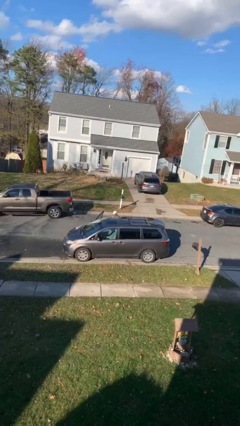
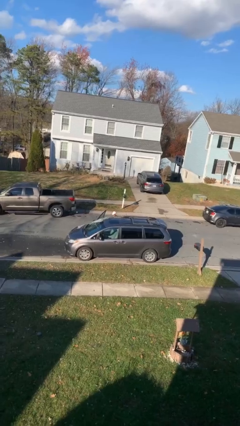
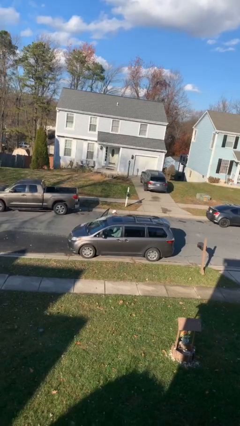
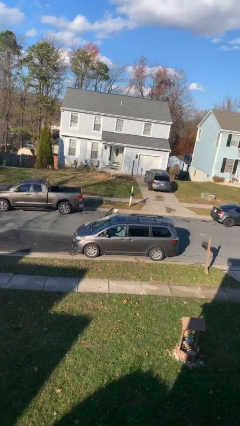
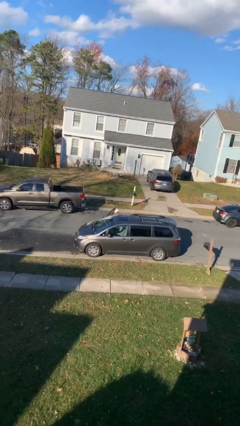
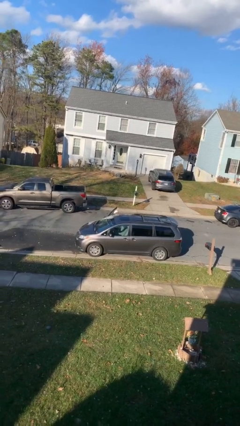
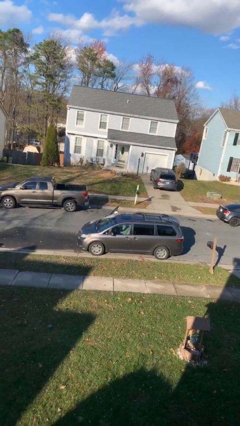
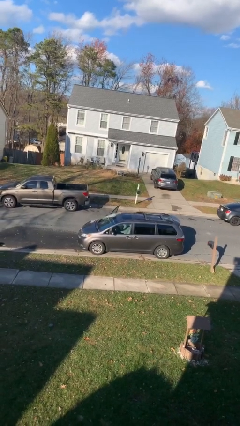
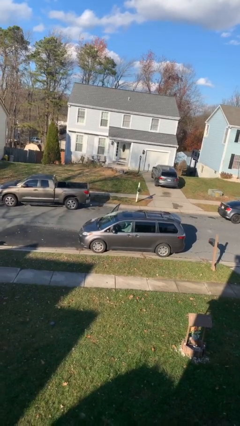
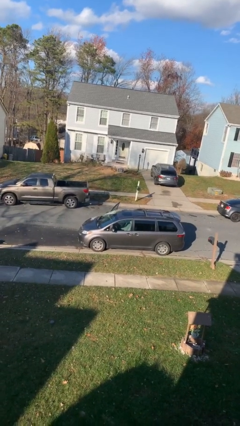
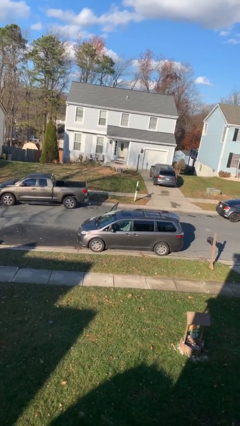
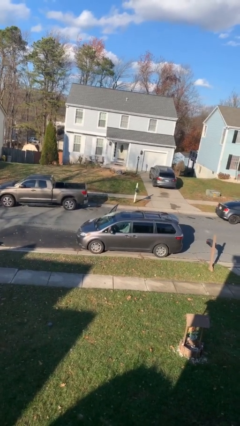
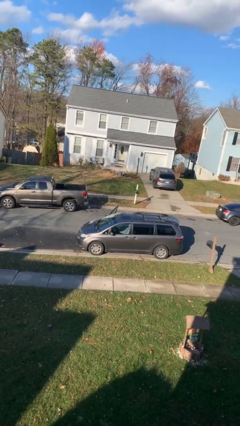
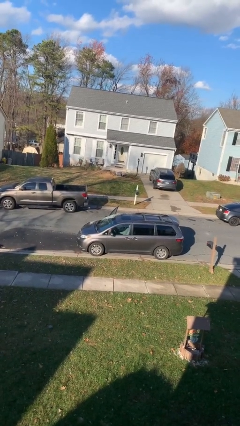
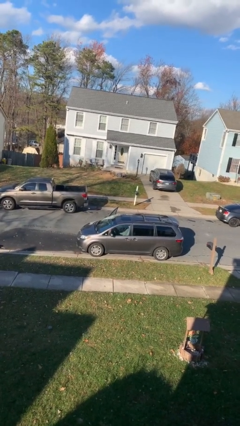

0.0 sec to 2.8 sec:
person enters car

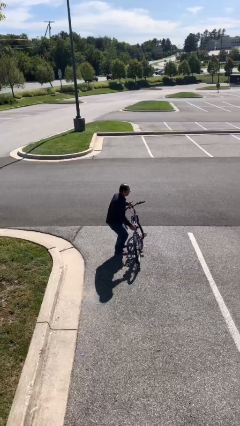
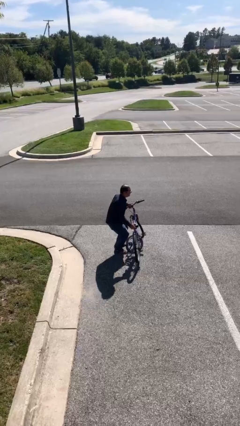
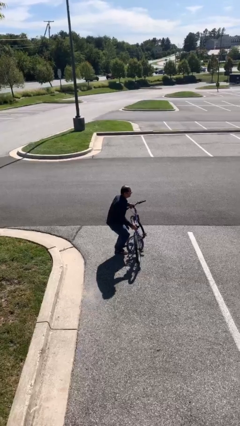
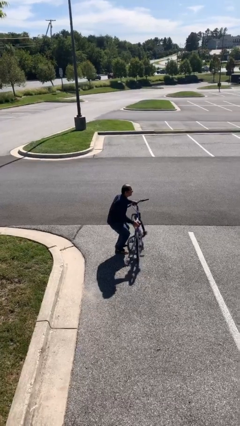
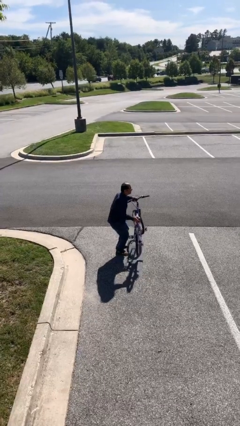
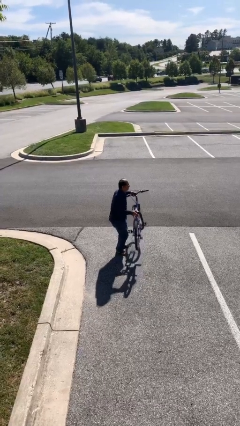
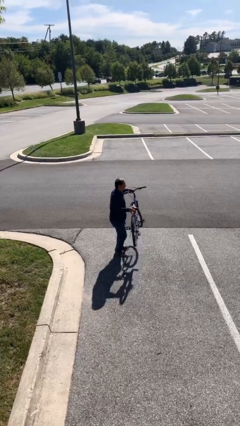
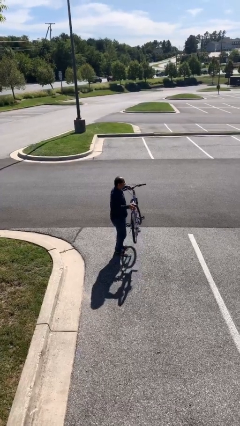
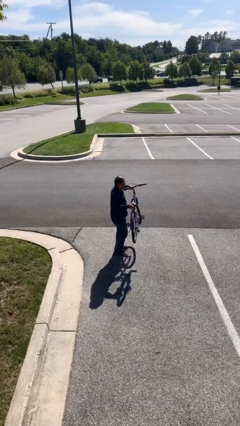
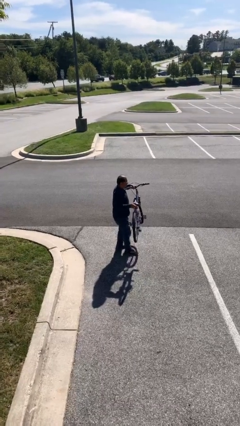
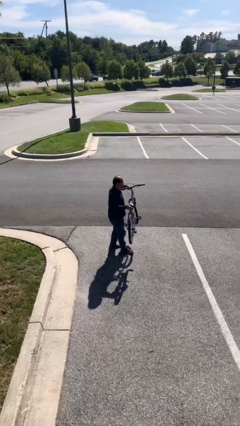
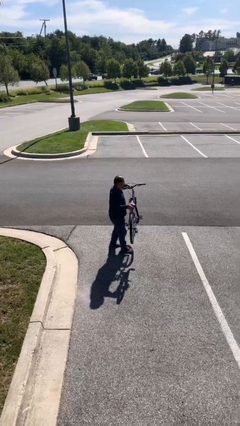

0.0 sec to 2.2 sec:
person picks up object from floor

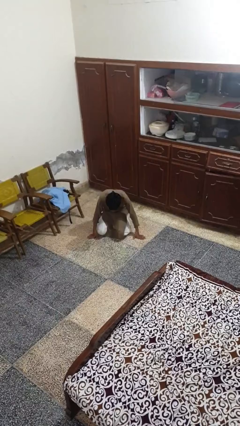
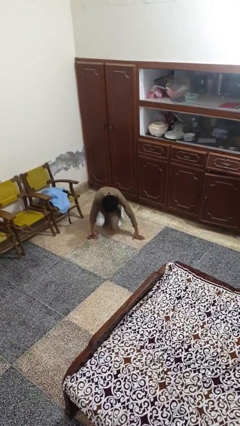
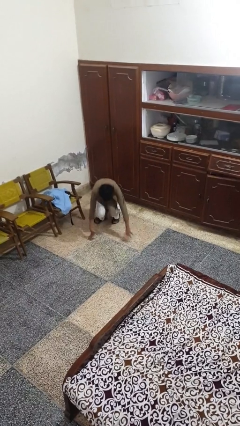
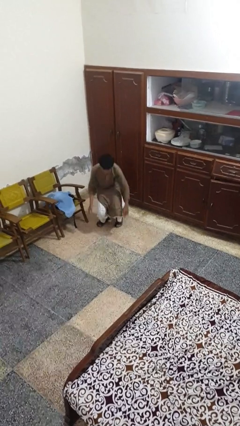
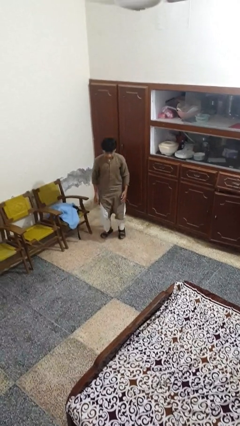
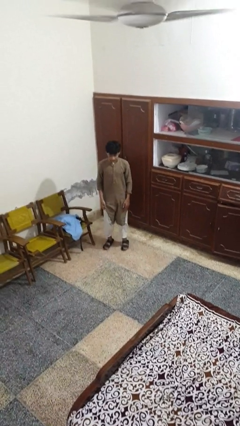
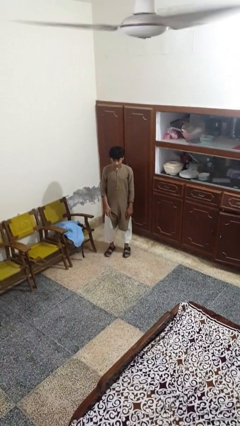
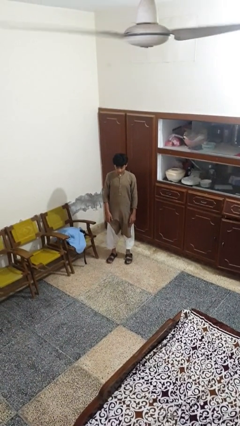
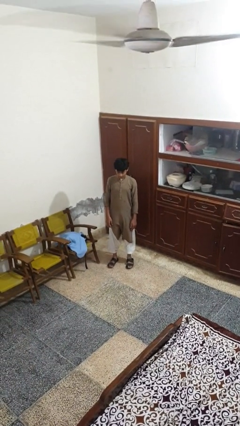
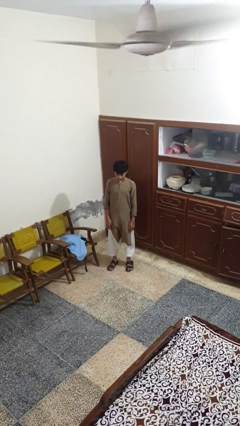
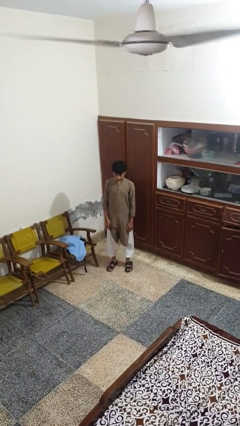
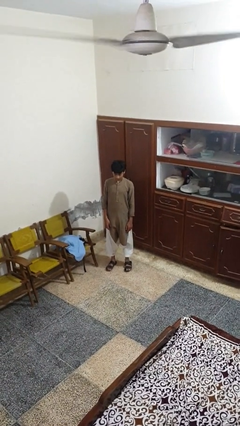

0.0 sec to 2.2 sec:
person stands up from floor

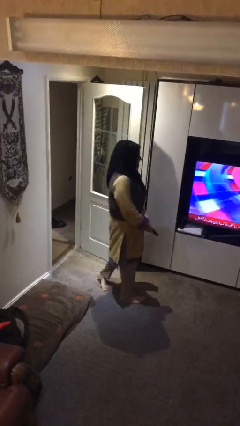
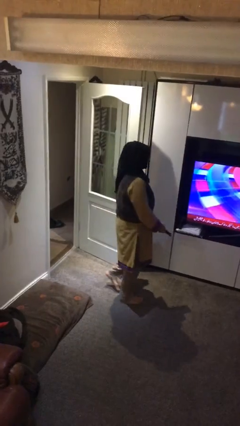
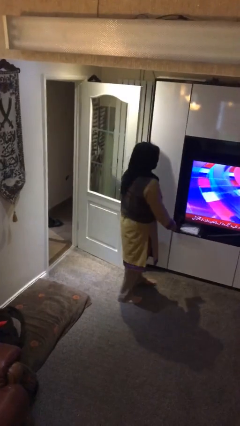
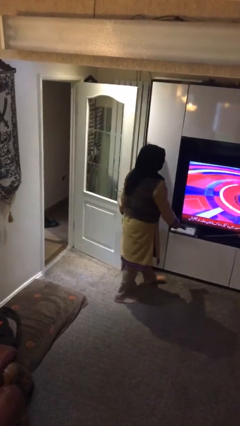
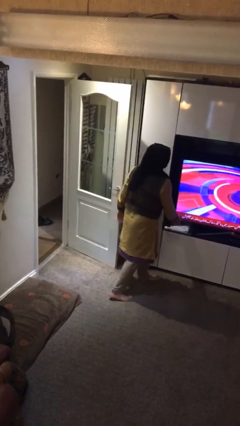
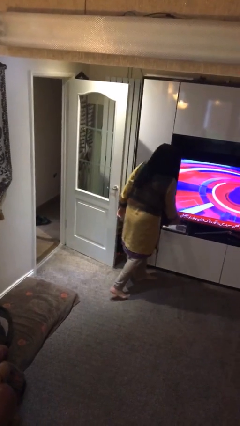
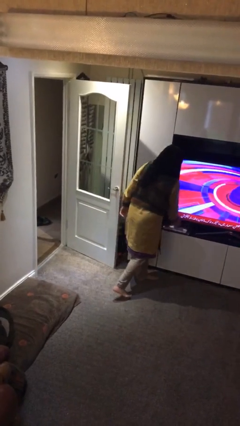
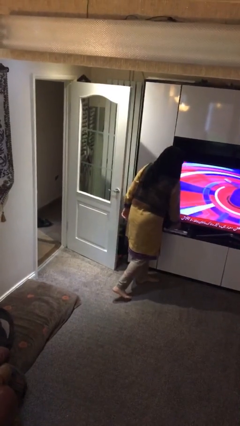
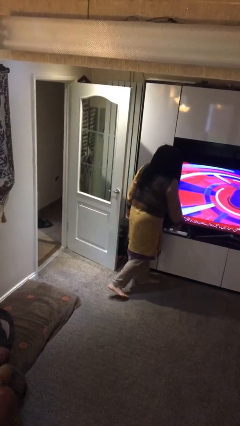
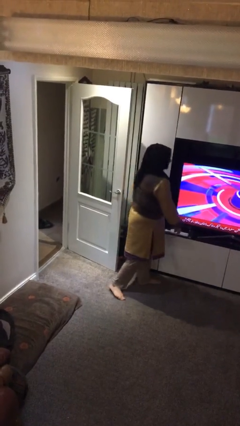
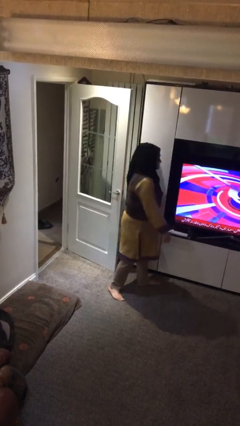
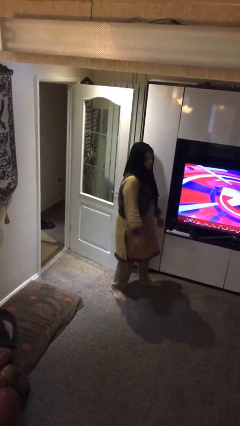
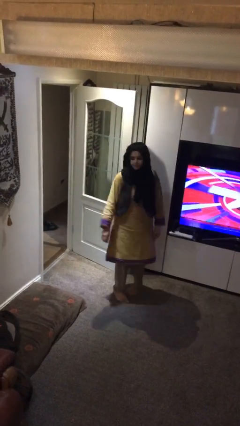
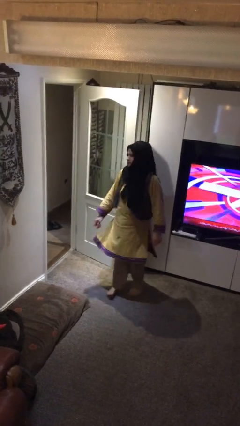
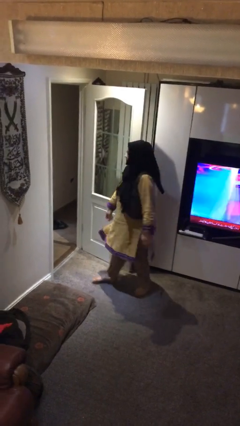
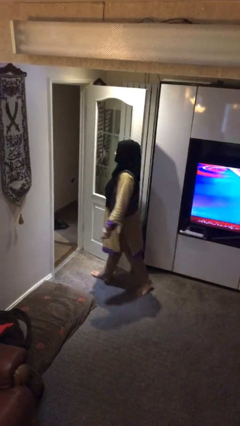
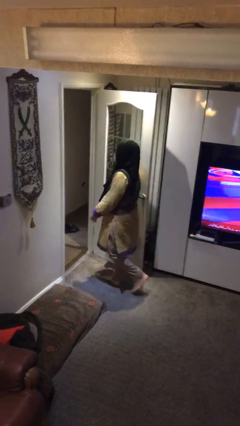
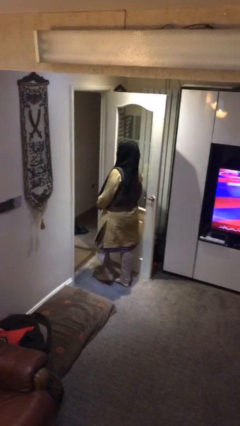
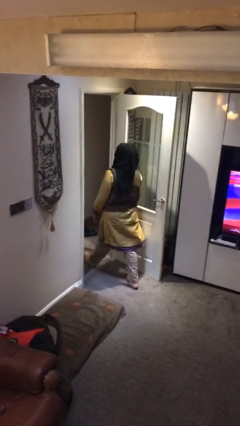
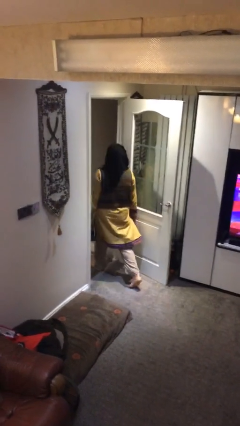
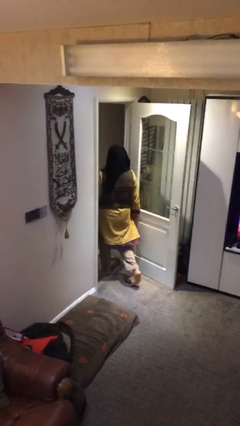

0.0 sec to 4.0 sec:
person exits scene through structure

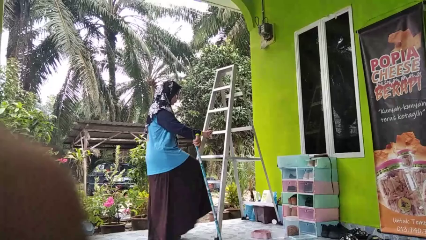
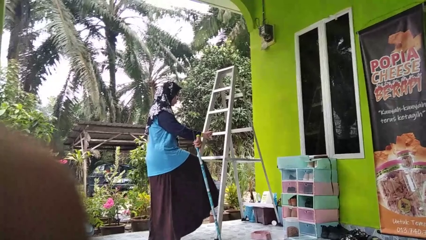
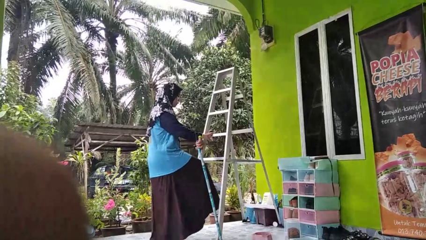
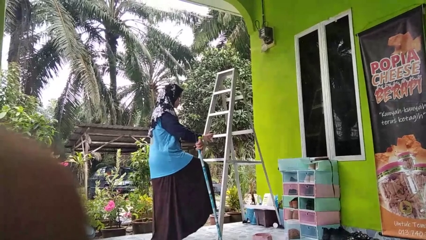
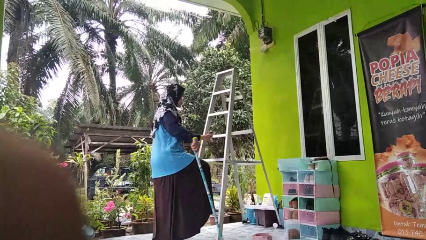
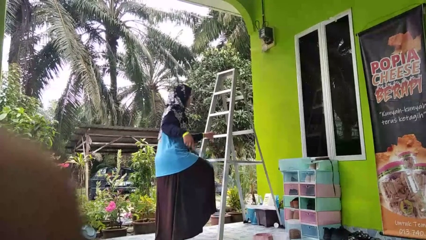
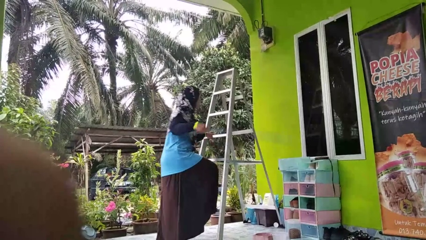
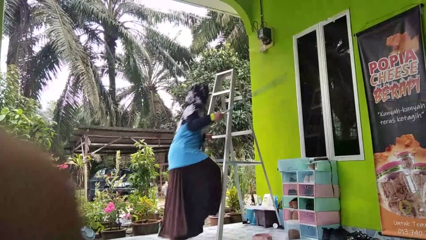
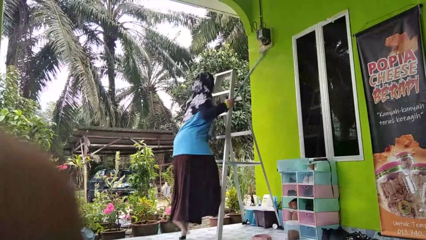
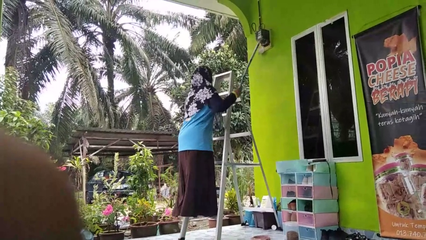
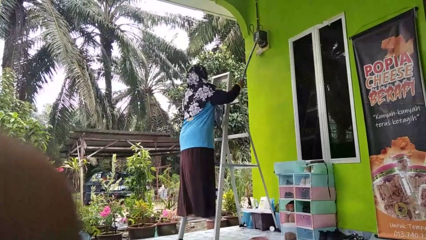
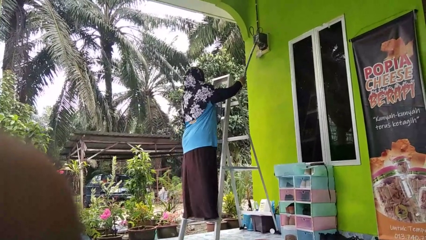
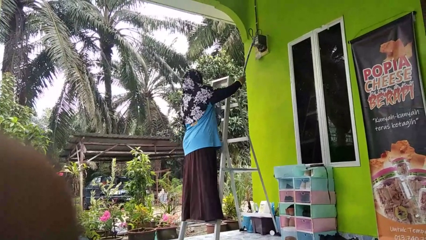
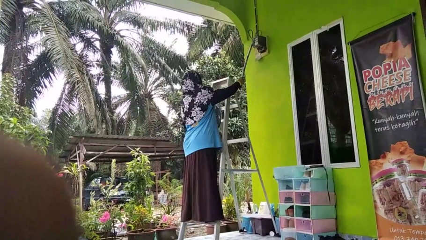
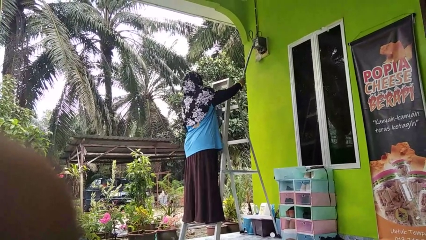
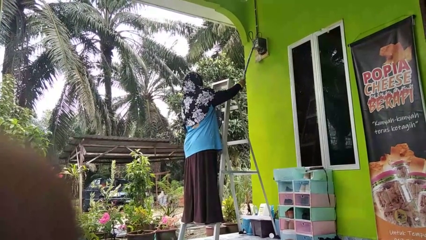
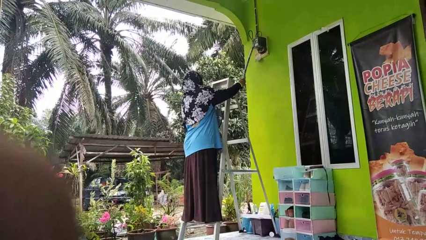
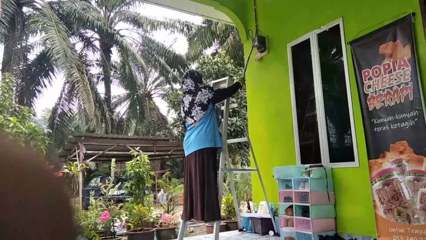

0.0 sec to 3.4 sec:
person climbs up ladder

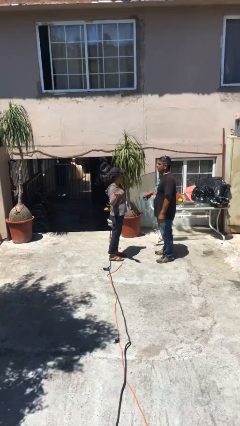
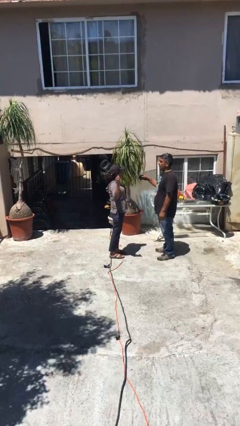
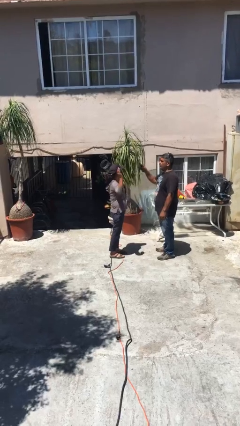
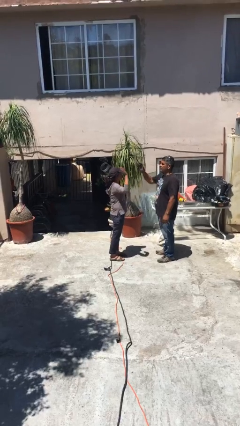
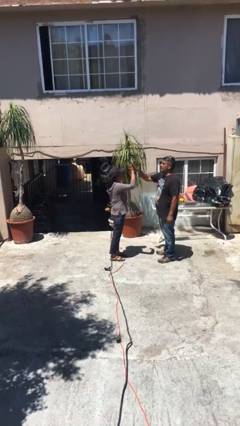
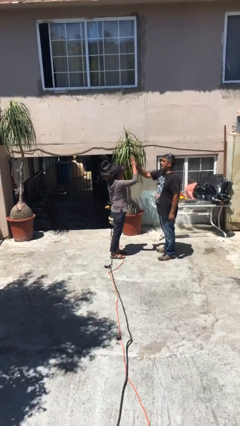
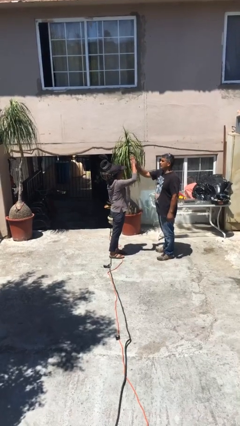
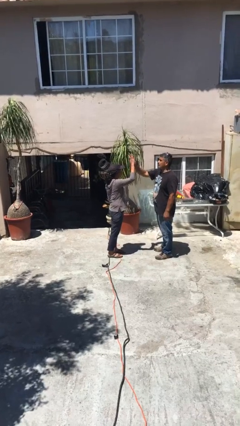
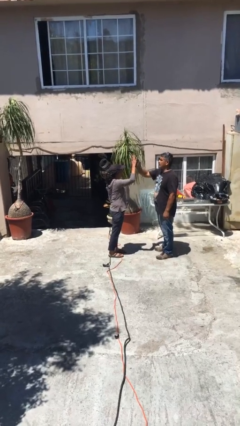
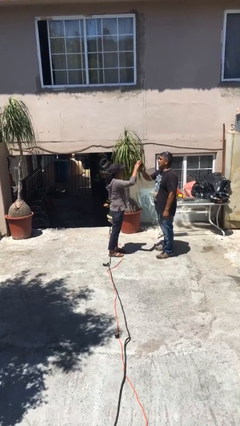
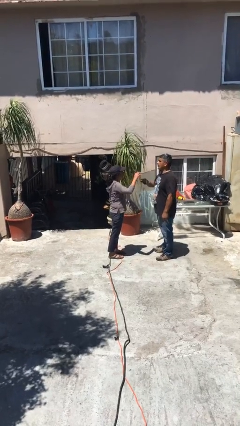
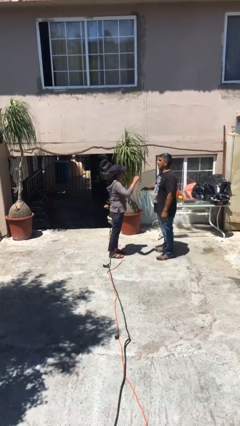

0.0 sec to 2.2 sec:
person highfives hand

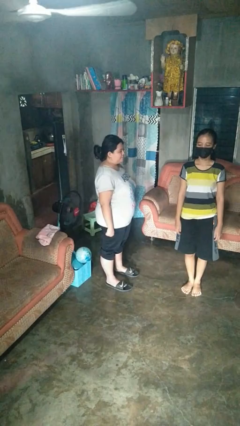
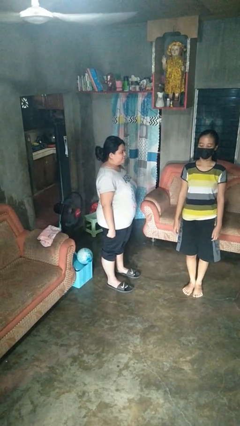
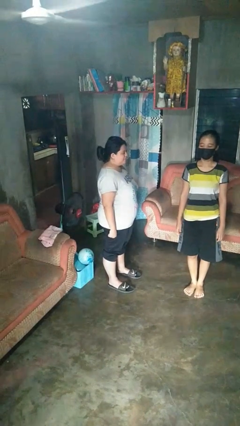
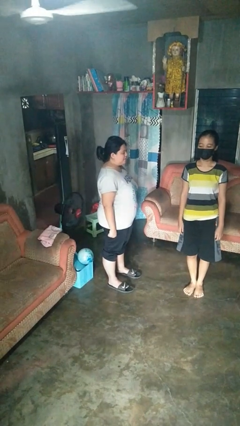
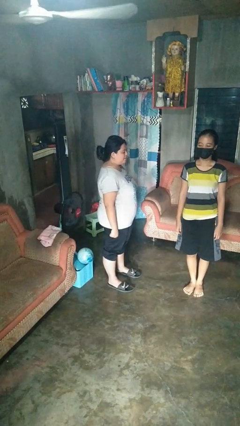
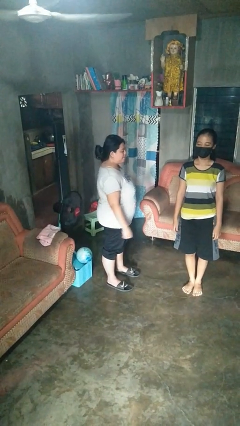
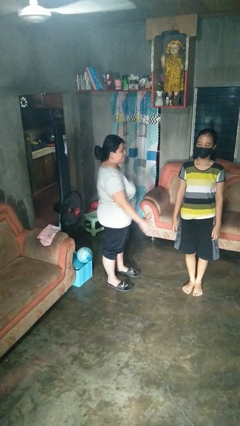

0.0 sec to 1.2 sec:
person grabs person by forearm
